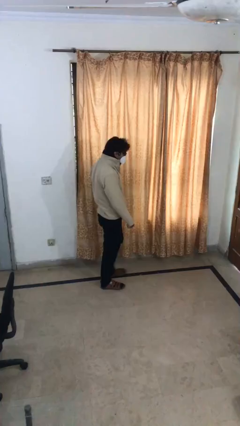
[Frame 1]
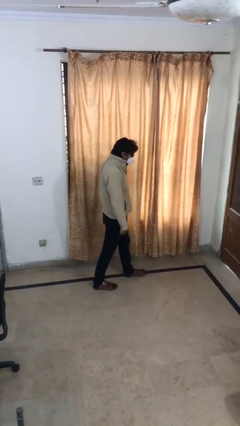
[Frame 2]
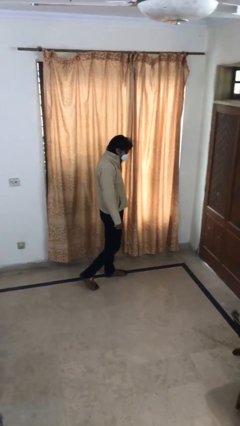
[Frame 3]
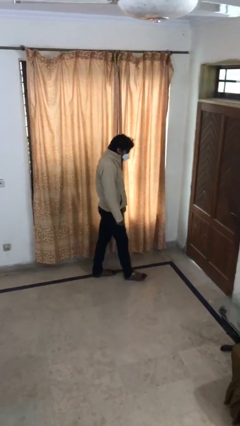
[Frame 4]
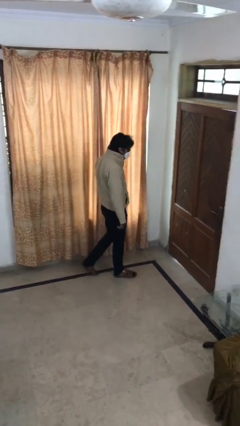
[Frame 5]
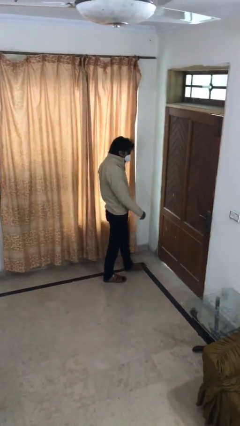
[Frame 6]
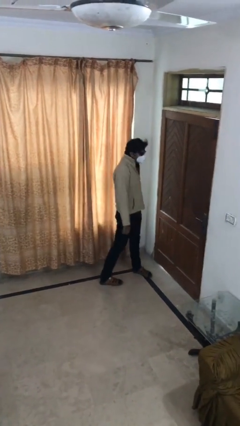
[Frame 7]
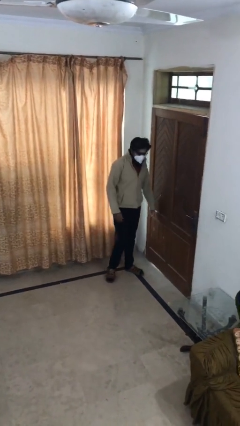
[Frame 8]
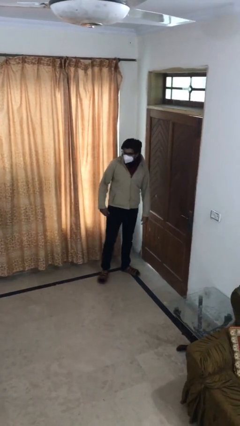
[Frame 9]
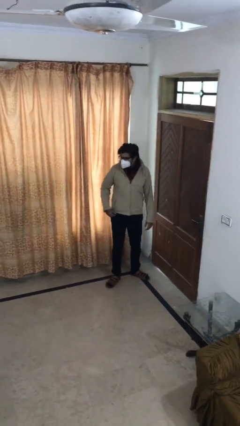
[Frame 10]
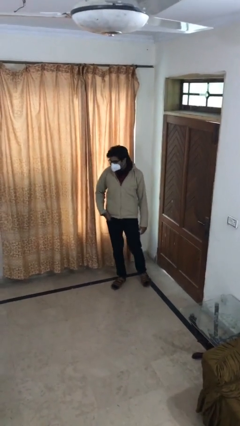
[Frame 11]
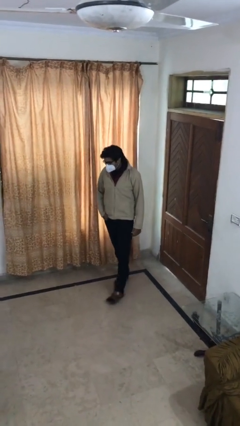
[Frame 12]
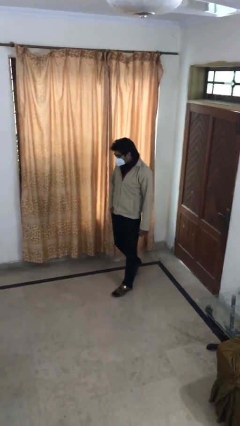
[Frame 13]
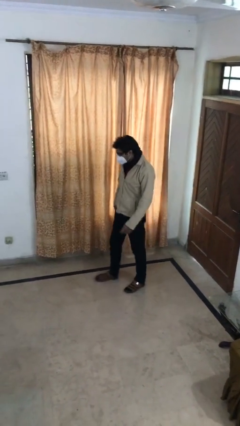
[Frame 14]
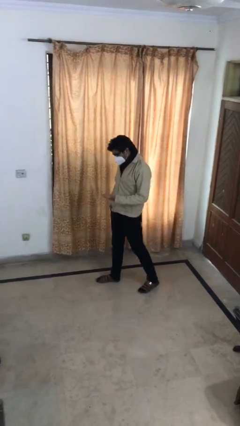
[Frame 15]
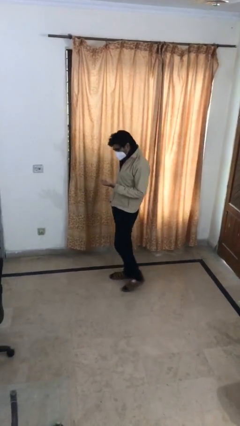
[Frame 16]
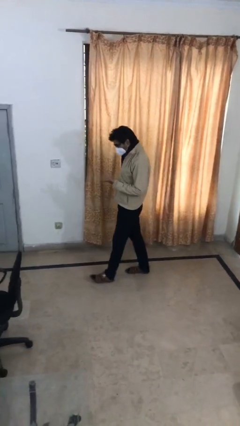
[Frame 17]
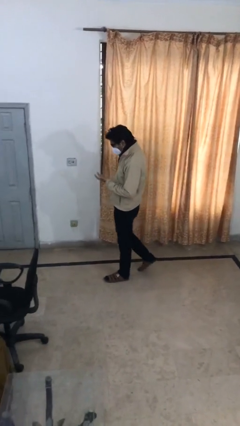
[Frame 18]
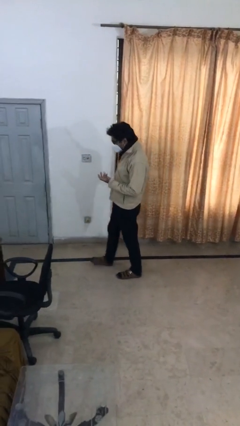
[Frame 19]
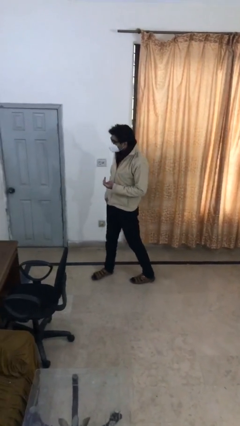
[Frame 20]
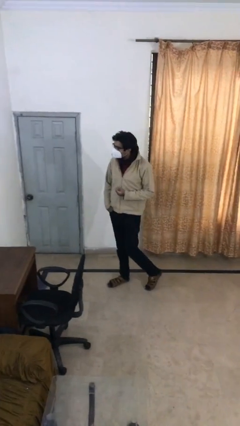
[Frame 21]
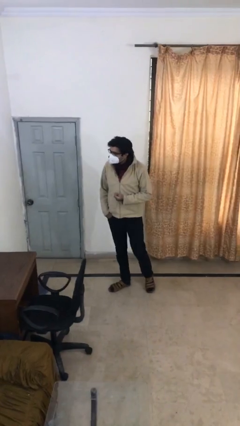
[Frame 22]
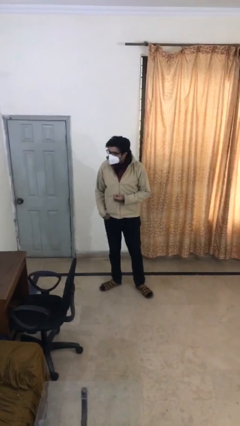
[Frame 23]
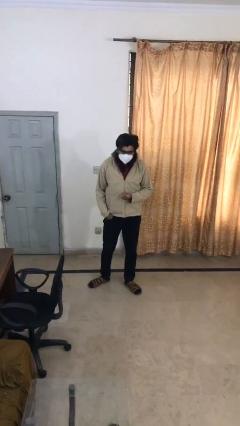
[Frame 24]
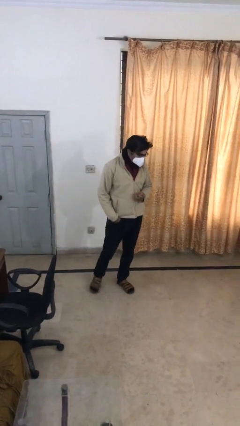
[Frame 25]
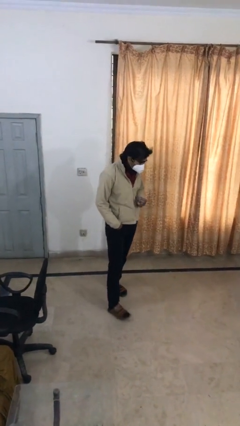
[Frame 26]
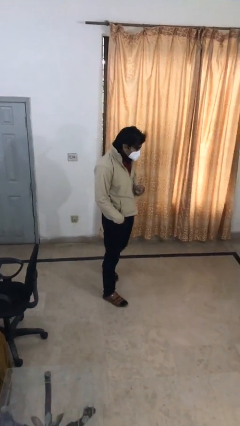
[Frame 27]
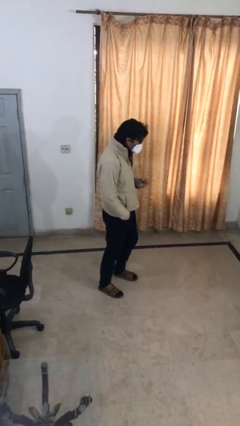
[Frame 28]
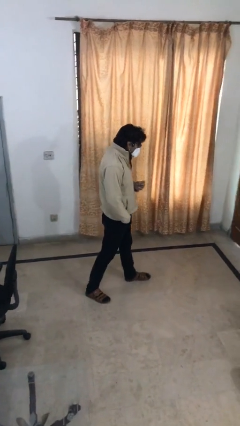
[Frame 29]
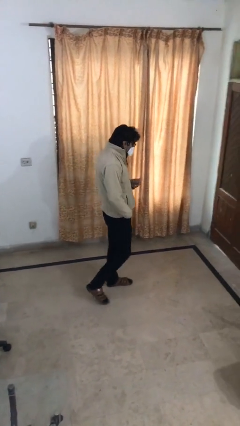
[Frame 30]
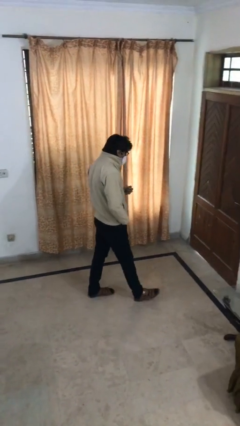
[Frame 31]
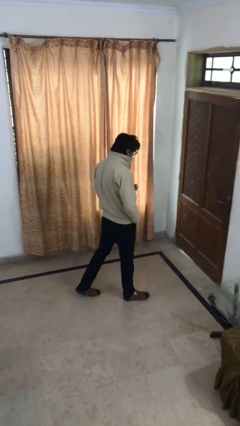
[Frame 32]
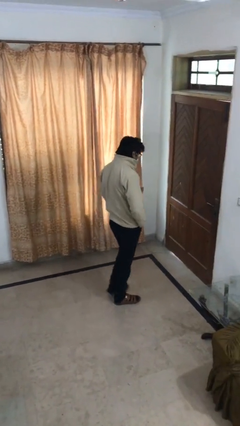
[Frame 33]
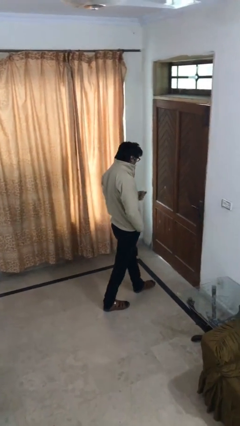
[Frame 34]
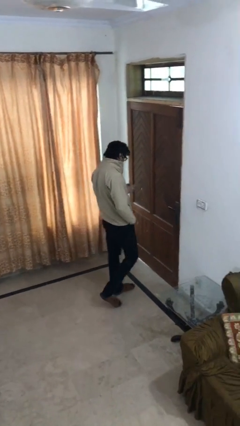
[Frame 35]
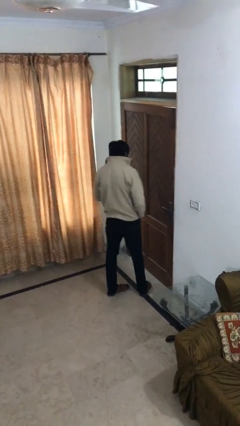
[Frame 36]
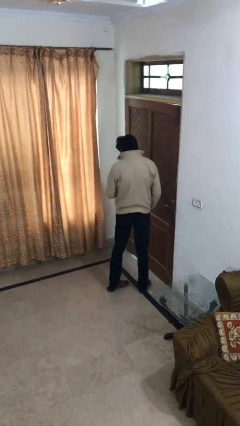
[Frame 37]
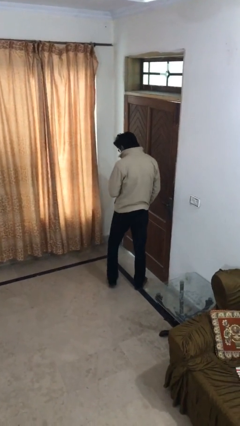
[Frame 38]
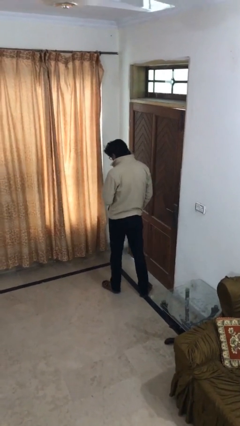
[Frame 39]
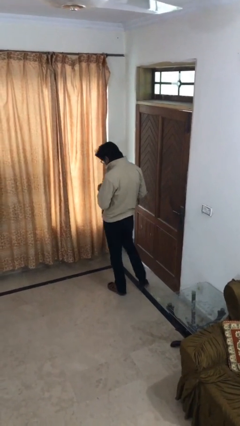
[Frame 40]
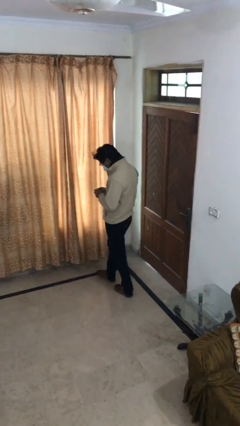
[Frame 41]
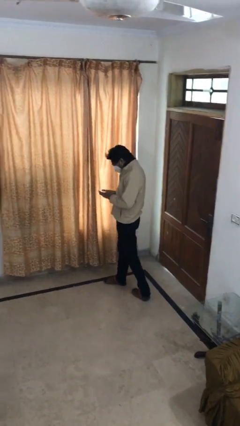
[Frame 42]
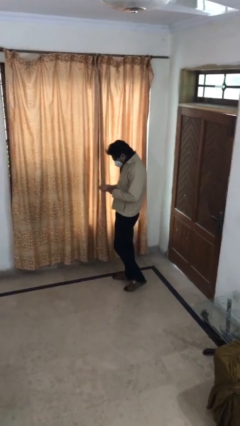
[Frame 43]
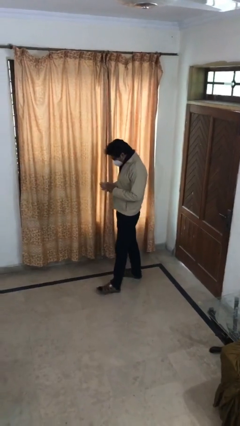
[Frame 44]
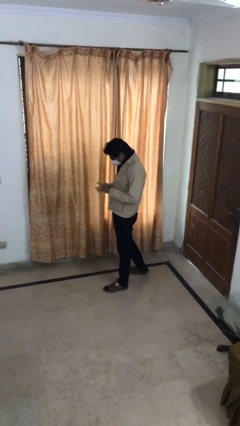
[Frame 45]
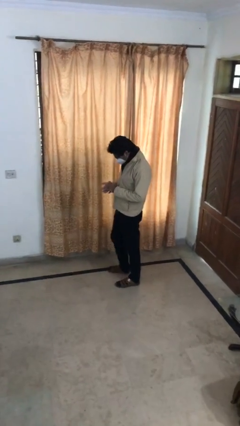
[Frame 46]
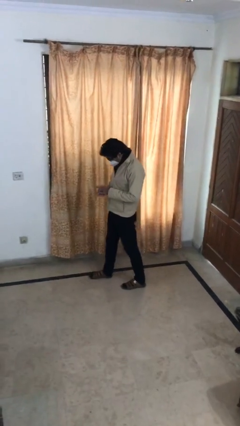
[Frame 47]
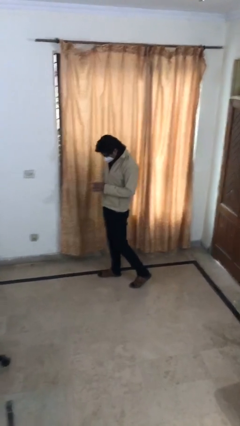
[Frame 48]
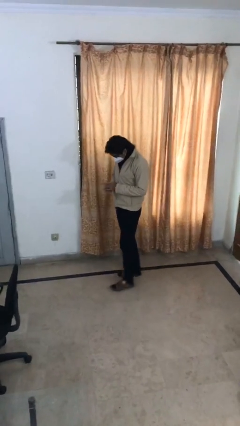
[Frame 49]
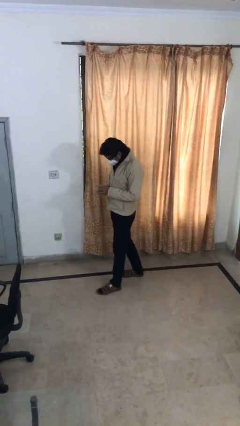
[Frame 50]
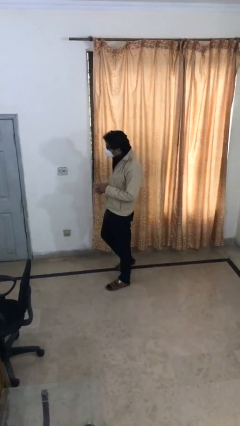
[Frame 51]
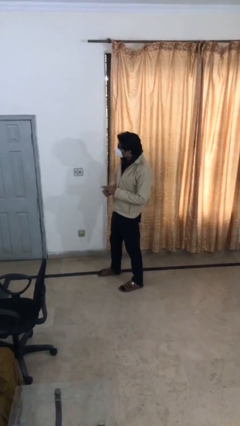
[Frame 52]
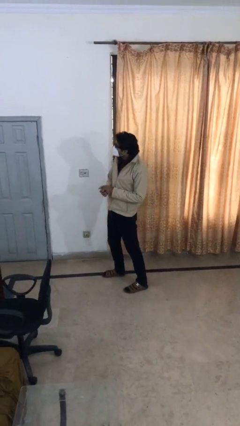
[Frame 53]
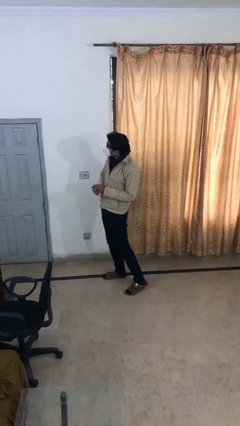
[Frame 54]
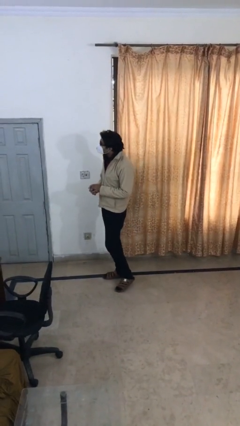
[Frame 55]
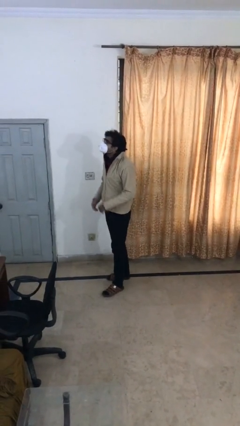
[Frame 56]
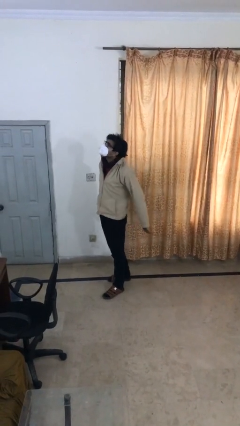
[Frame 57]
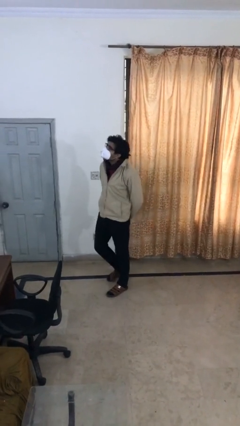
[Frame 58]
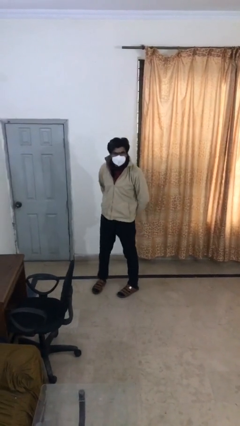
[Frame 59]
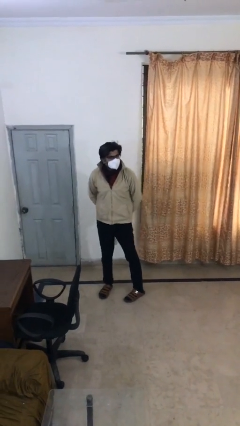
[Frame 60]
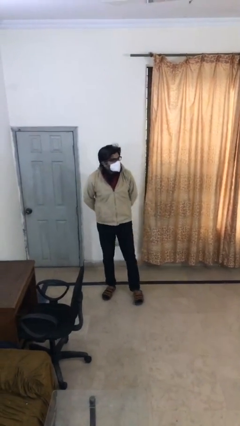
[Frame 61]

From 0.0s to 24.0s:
person walks

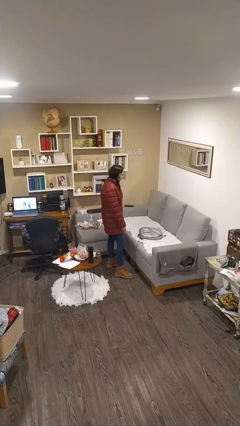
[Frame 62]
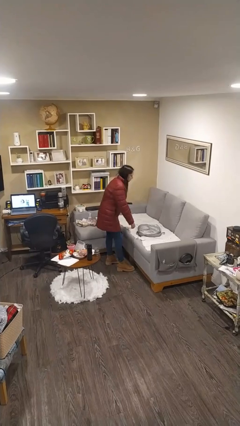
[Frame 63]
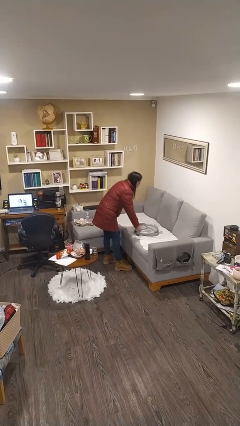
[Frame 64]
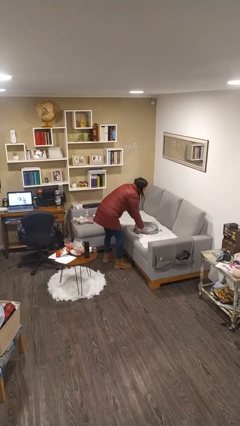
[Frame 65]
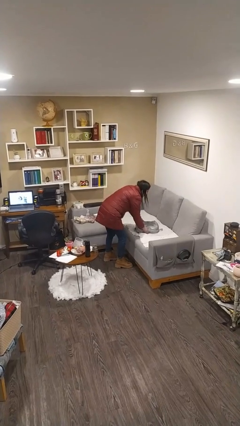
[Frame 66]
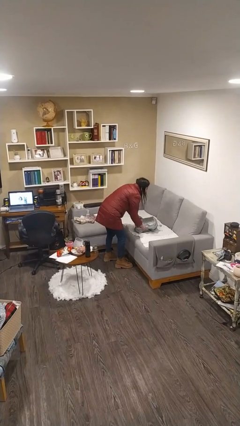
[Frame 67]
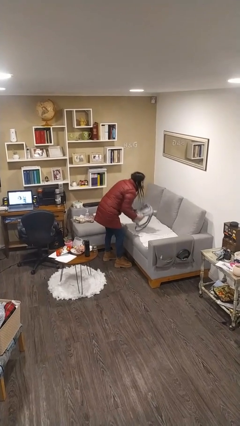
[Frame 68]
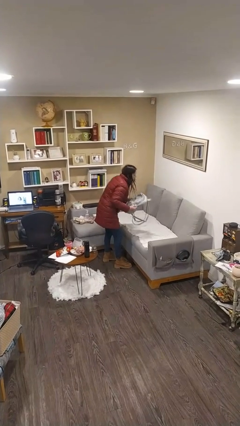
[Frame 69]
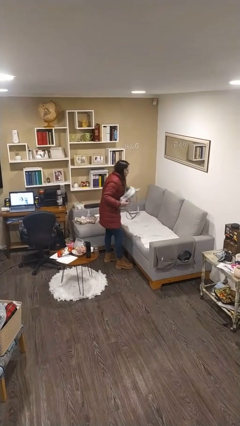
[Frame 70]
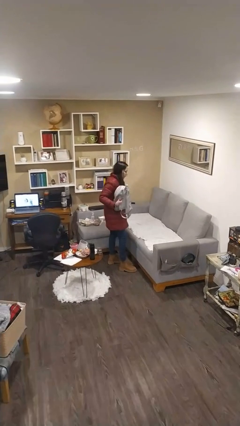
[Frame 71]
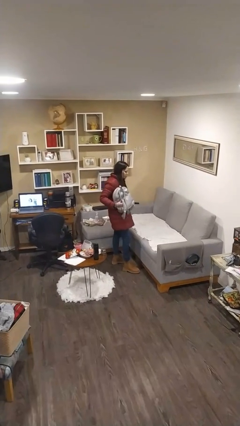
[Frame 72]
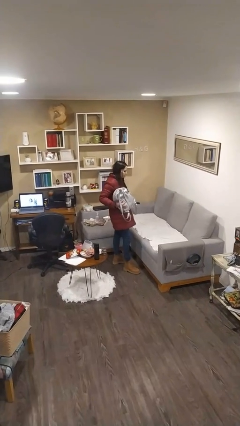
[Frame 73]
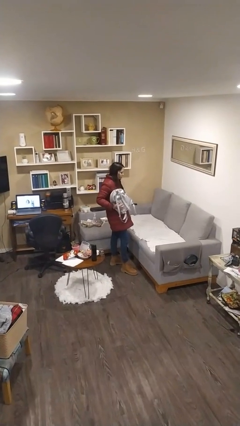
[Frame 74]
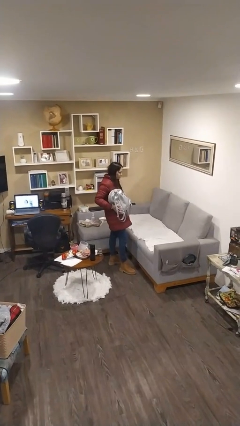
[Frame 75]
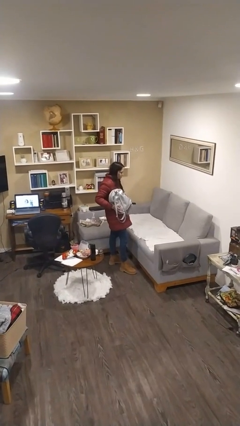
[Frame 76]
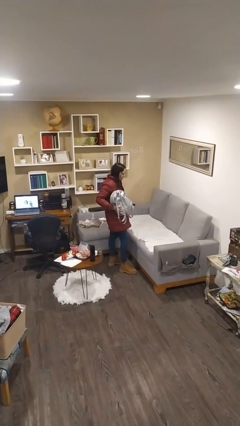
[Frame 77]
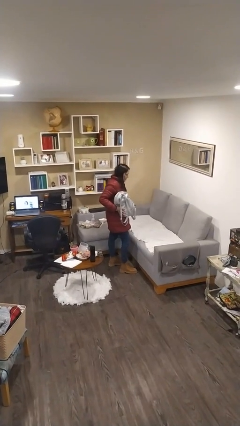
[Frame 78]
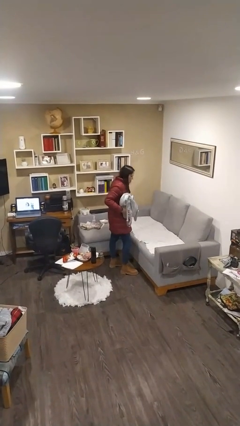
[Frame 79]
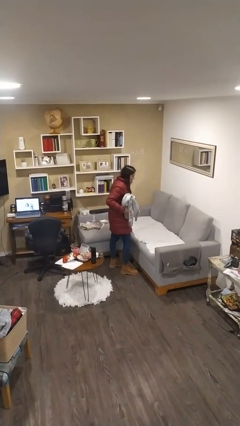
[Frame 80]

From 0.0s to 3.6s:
person picks up object from couch

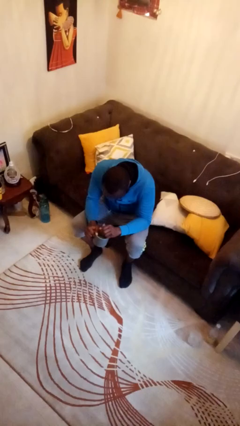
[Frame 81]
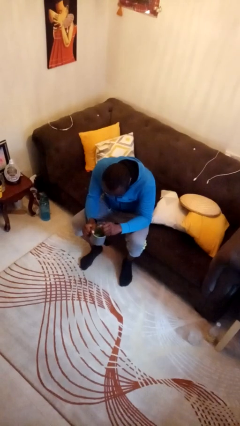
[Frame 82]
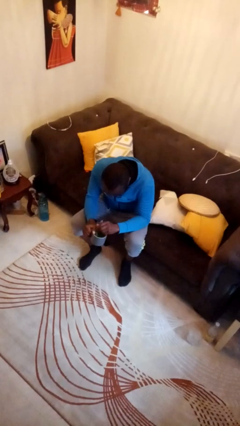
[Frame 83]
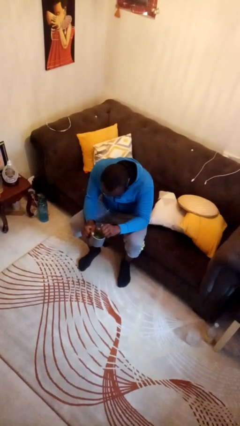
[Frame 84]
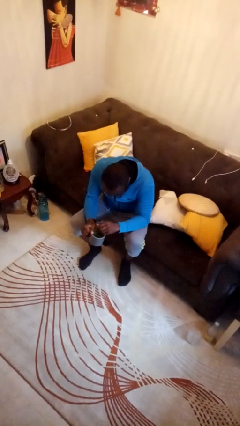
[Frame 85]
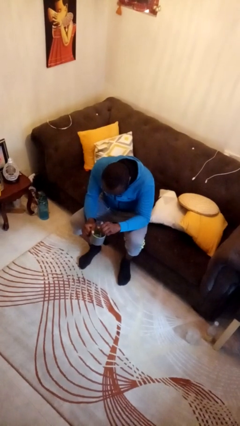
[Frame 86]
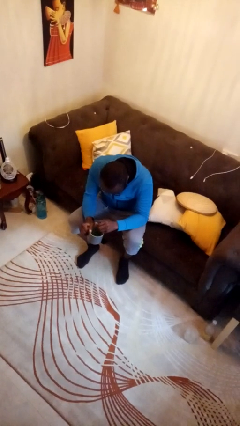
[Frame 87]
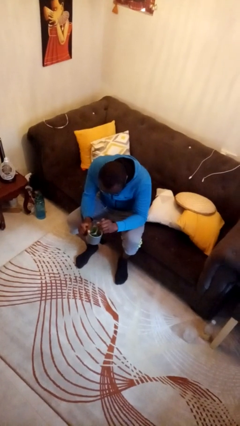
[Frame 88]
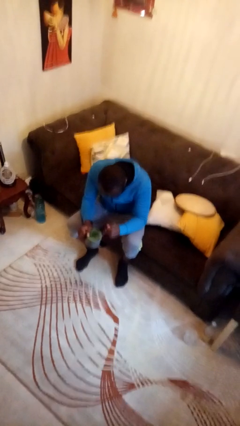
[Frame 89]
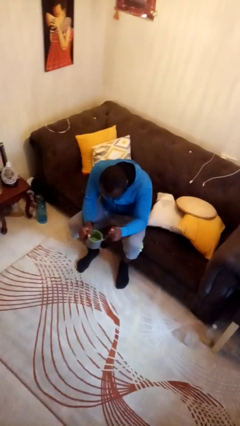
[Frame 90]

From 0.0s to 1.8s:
person stirs mug

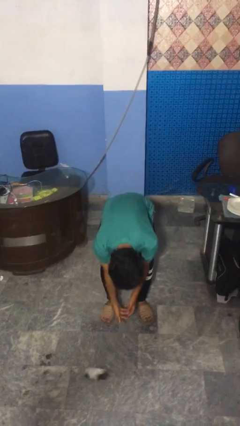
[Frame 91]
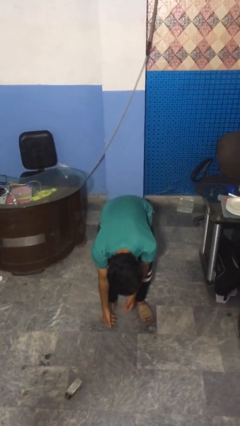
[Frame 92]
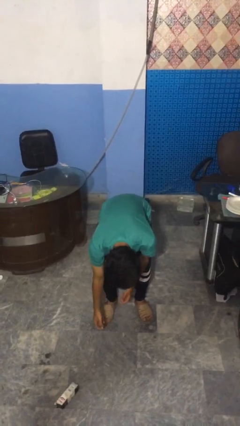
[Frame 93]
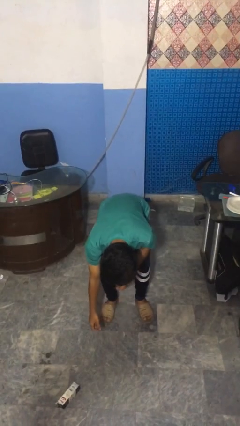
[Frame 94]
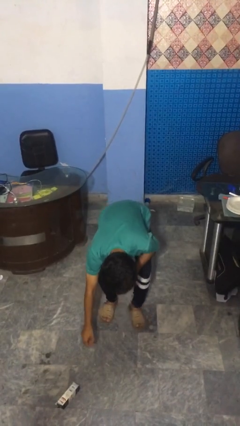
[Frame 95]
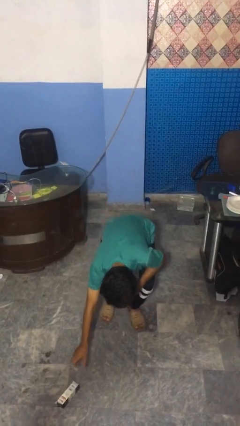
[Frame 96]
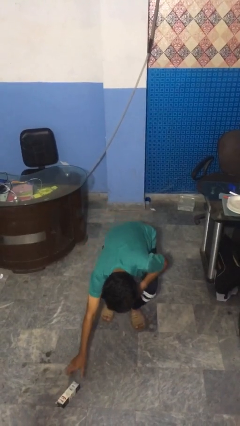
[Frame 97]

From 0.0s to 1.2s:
person catches dropped object
